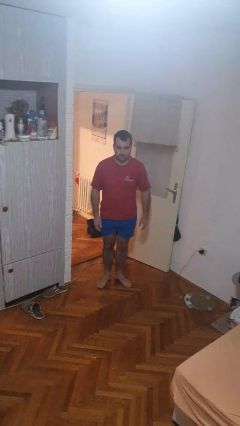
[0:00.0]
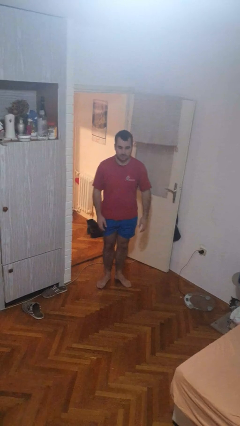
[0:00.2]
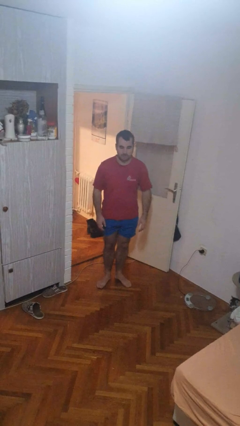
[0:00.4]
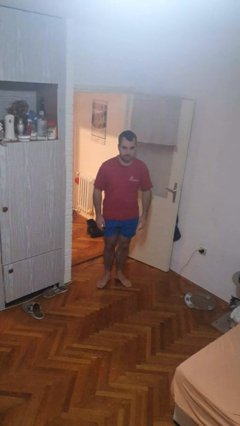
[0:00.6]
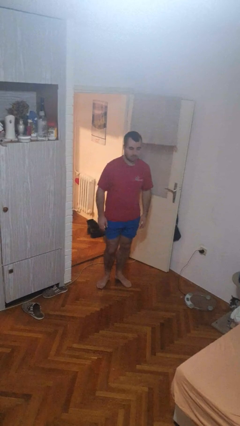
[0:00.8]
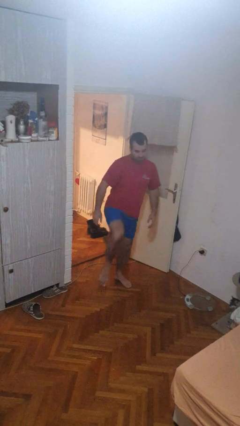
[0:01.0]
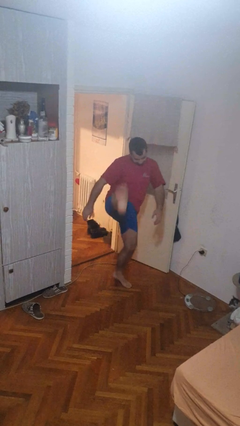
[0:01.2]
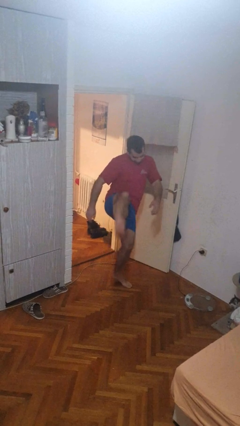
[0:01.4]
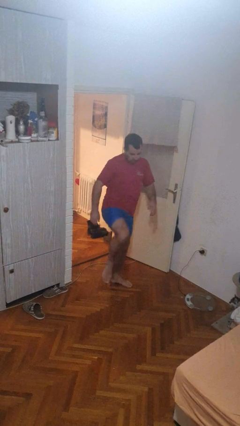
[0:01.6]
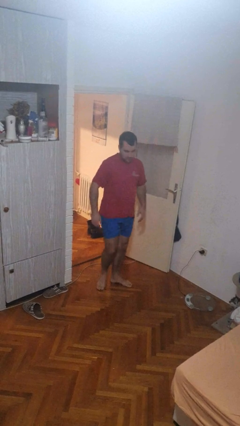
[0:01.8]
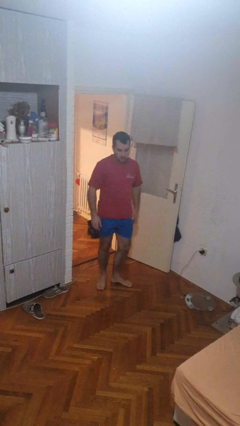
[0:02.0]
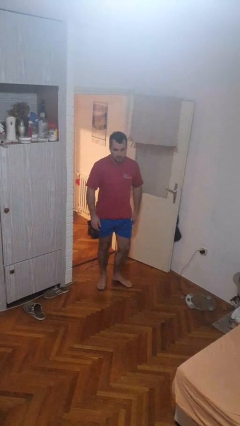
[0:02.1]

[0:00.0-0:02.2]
person karate kicks

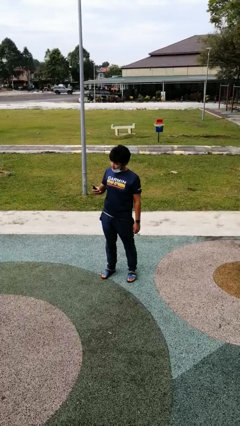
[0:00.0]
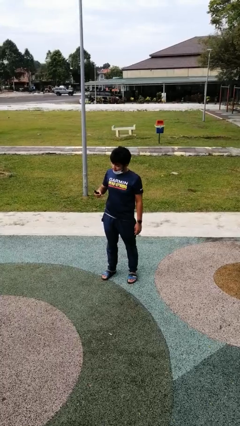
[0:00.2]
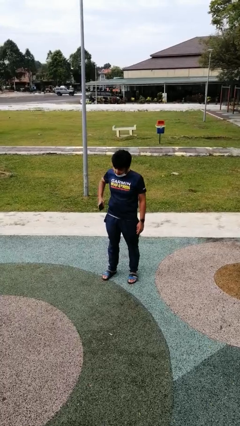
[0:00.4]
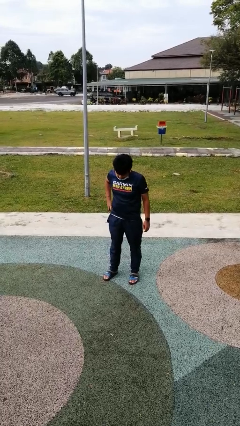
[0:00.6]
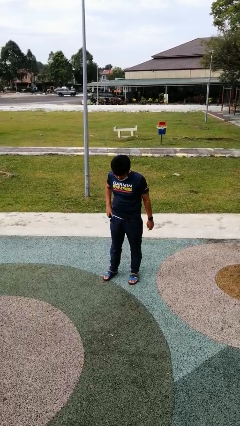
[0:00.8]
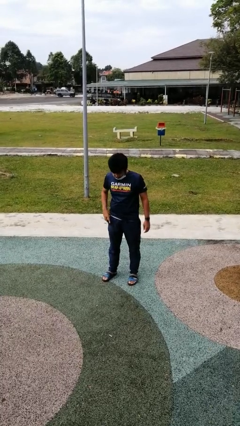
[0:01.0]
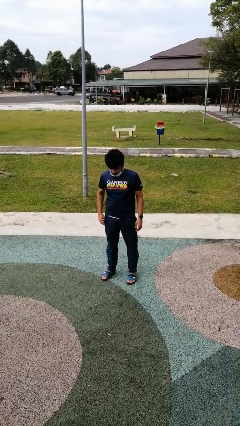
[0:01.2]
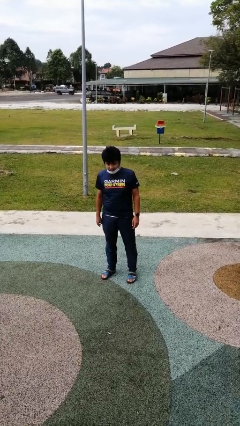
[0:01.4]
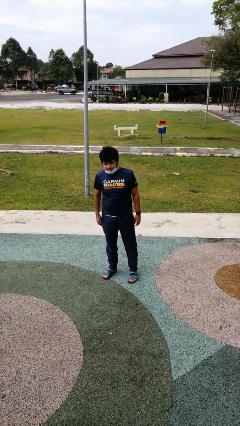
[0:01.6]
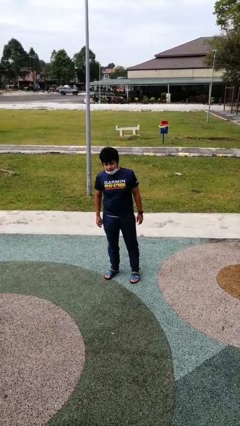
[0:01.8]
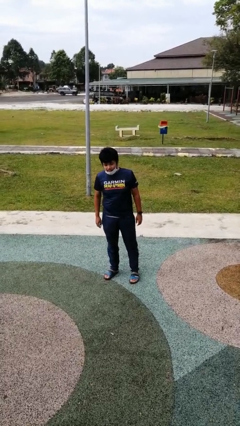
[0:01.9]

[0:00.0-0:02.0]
person puts phone into pocket

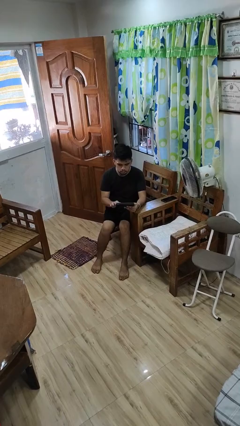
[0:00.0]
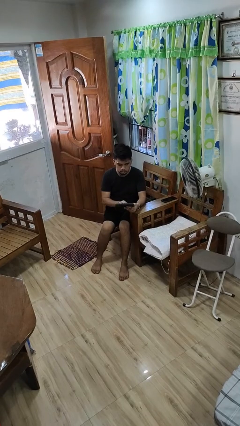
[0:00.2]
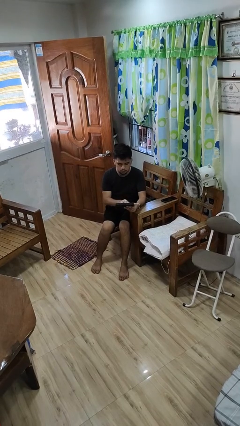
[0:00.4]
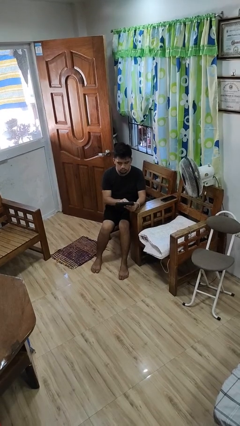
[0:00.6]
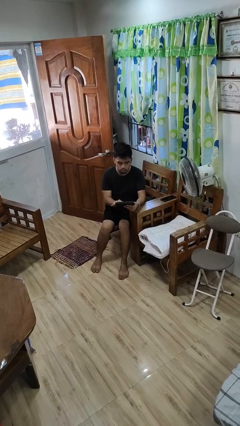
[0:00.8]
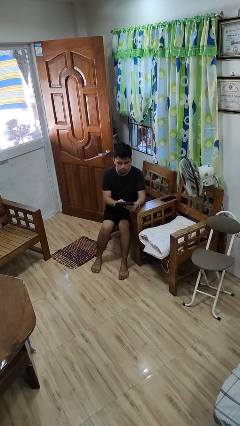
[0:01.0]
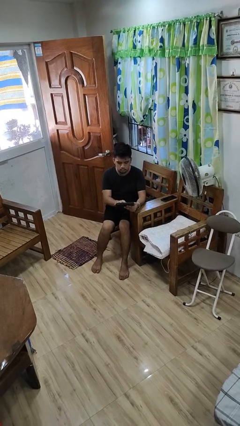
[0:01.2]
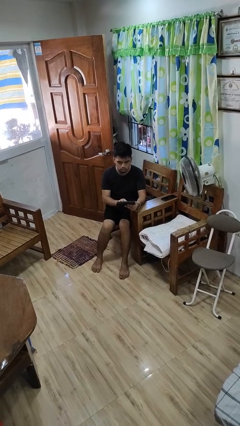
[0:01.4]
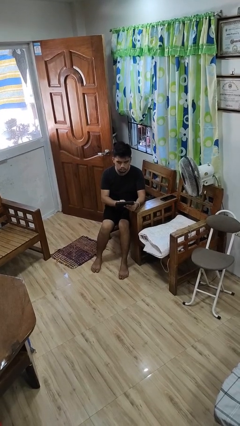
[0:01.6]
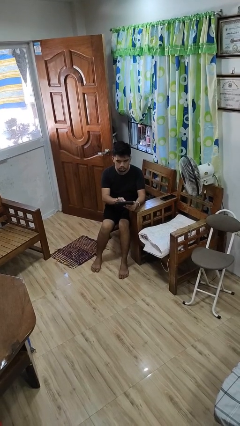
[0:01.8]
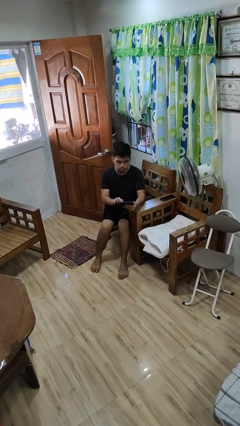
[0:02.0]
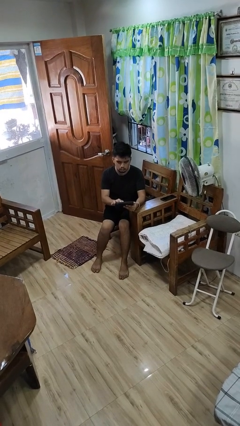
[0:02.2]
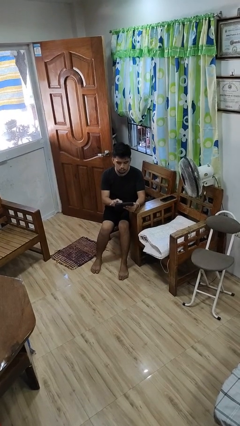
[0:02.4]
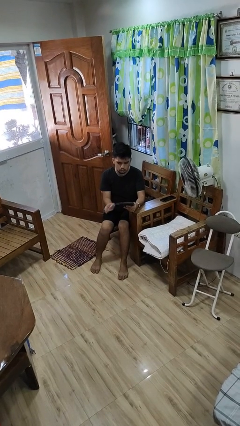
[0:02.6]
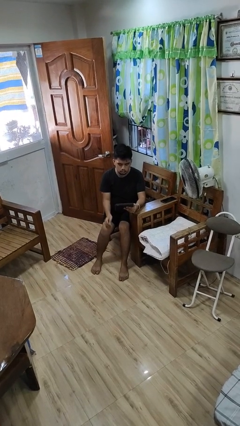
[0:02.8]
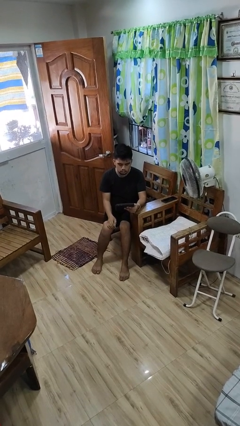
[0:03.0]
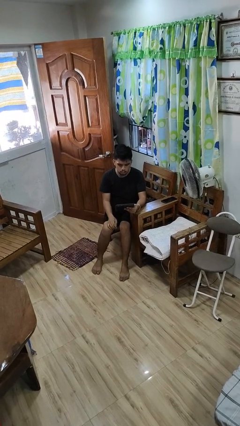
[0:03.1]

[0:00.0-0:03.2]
person interacts with tablet

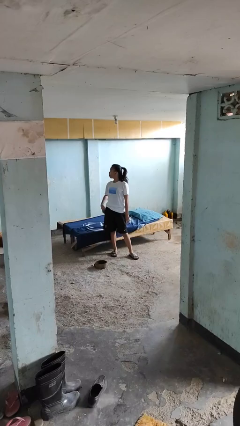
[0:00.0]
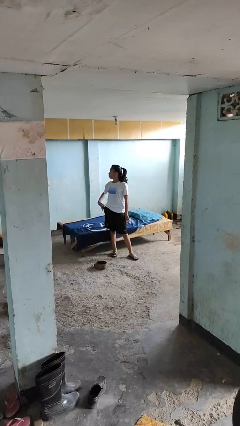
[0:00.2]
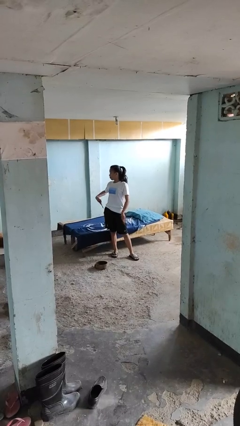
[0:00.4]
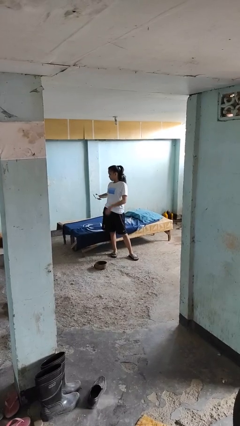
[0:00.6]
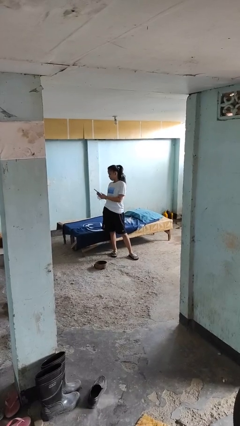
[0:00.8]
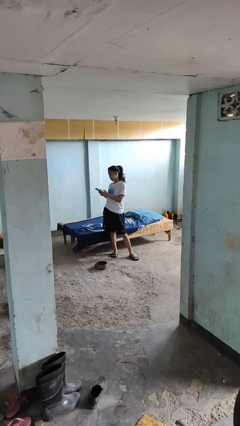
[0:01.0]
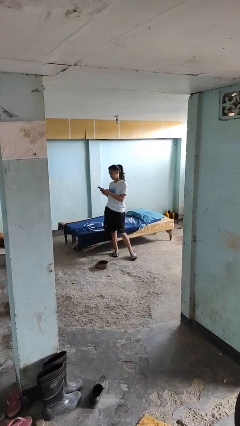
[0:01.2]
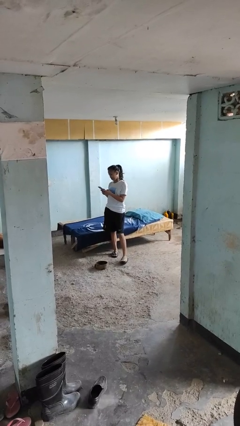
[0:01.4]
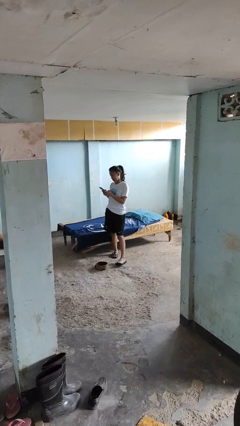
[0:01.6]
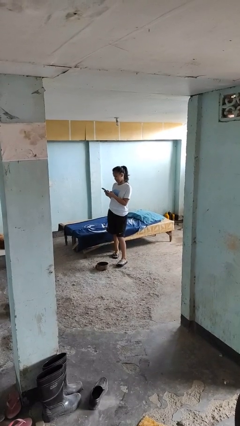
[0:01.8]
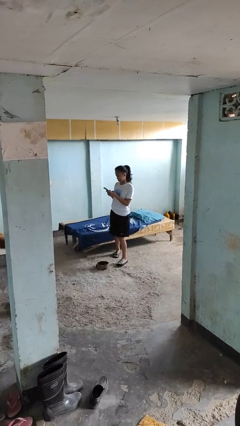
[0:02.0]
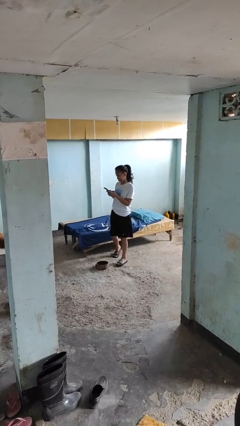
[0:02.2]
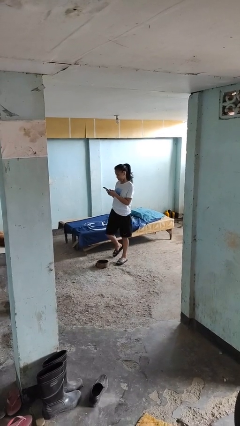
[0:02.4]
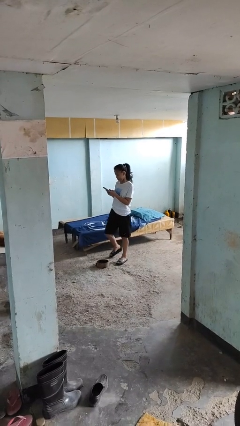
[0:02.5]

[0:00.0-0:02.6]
person takes phone from pocket

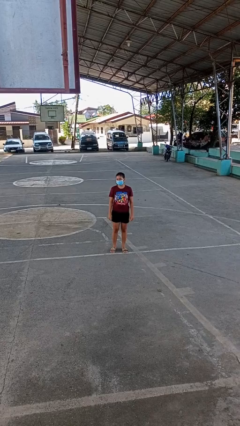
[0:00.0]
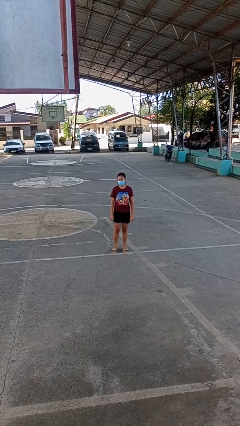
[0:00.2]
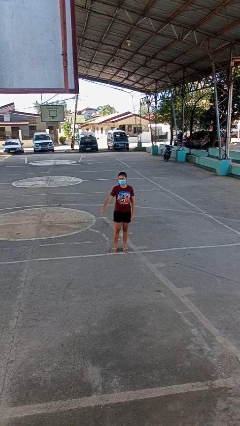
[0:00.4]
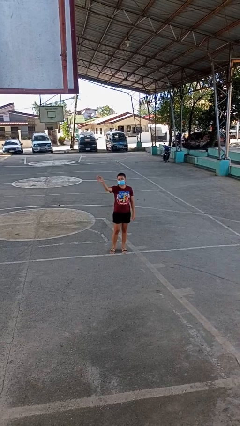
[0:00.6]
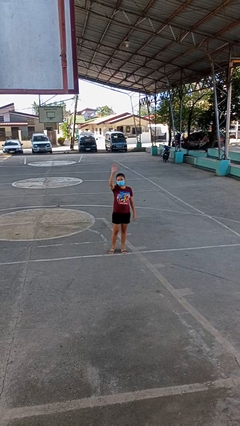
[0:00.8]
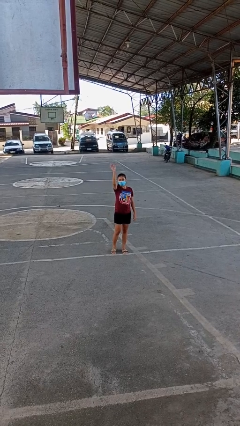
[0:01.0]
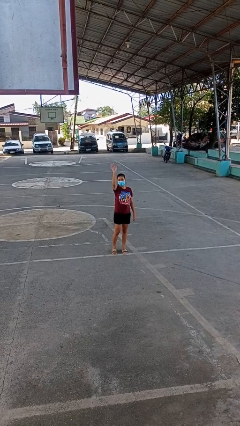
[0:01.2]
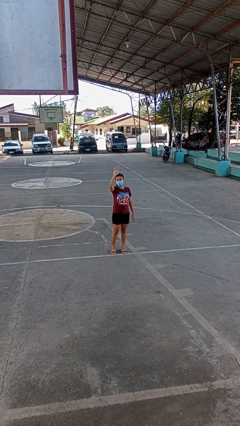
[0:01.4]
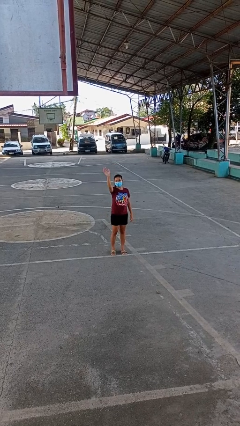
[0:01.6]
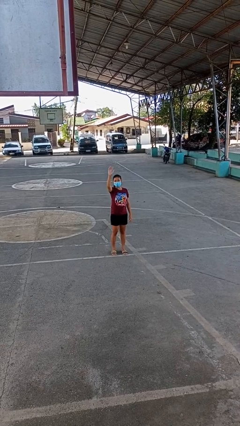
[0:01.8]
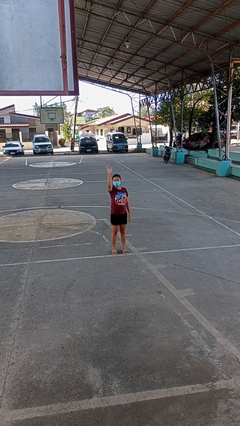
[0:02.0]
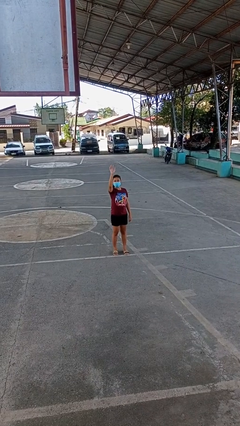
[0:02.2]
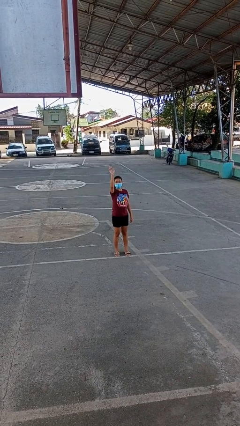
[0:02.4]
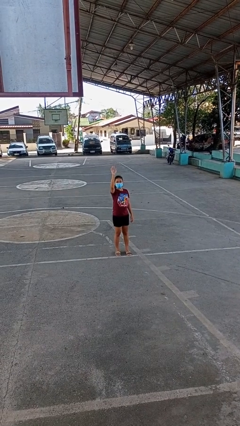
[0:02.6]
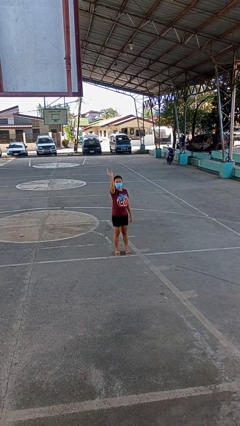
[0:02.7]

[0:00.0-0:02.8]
person waves at person

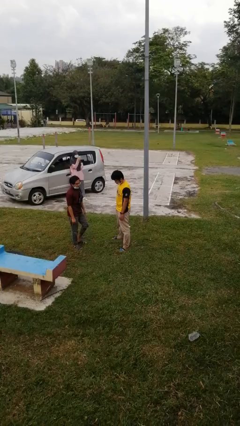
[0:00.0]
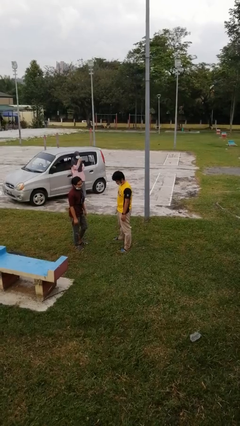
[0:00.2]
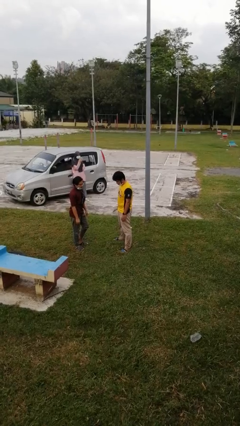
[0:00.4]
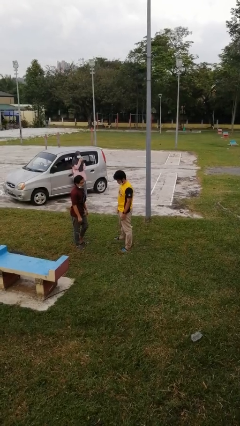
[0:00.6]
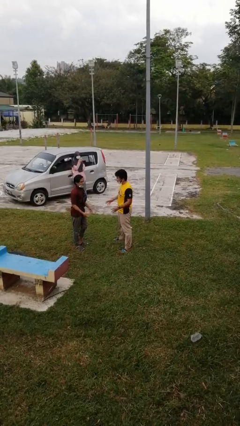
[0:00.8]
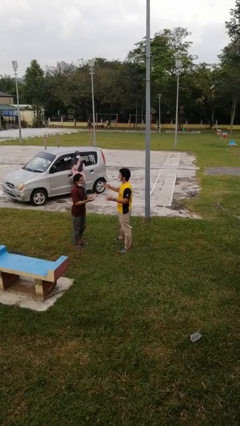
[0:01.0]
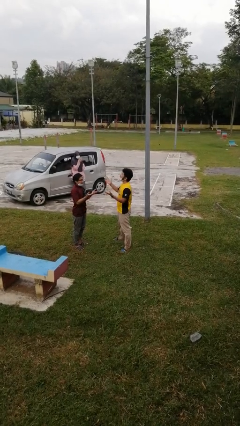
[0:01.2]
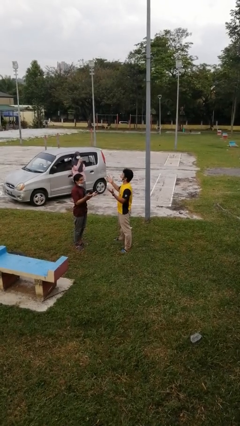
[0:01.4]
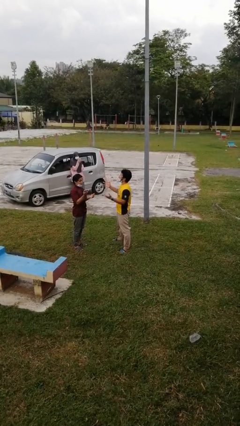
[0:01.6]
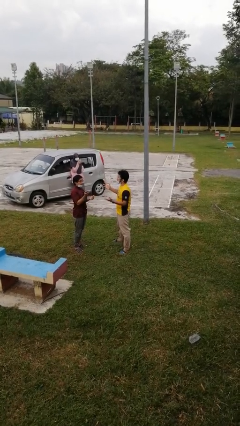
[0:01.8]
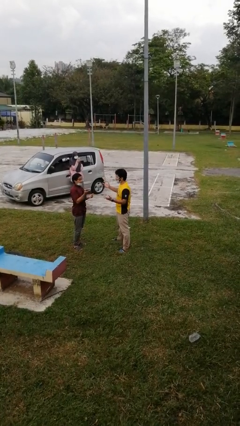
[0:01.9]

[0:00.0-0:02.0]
person talks to person

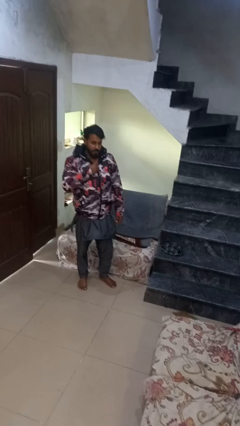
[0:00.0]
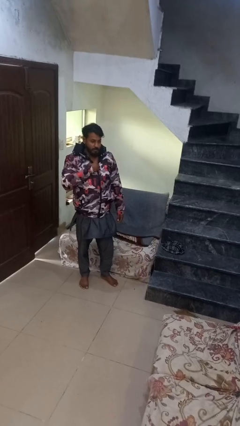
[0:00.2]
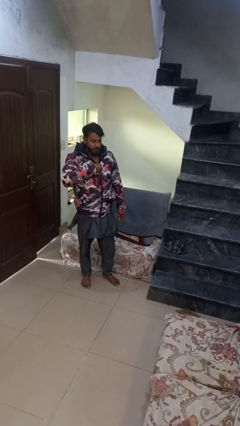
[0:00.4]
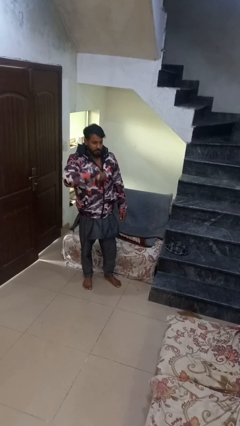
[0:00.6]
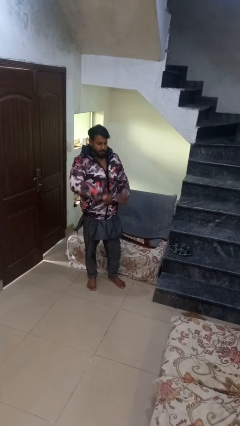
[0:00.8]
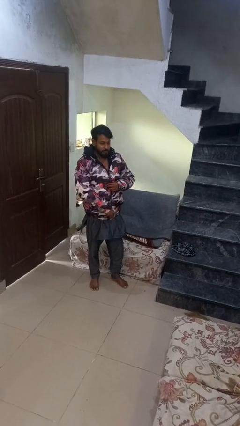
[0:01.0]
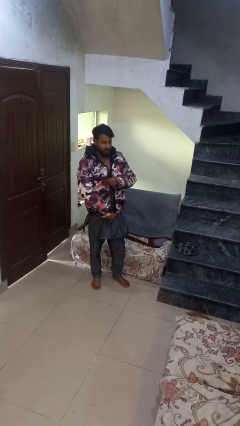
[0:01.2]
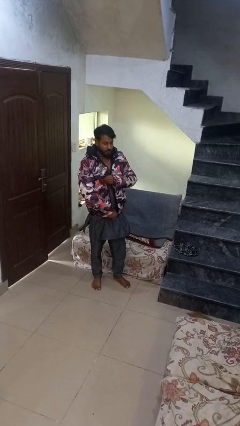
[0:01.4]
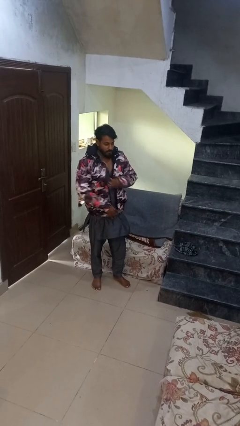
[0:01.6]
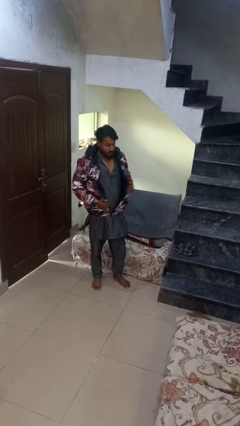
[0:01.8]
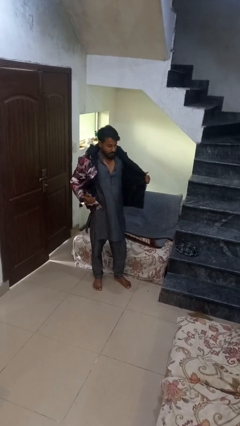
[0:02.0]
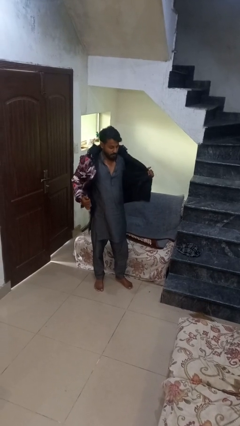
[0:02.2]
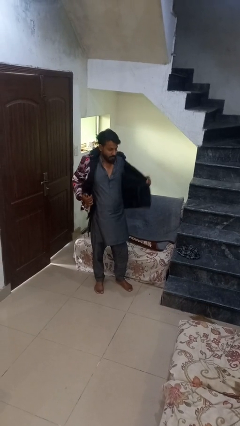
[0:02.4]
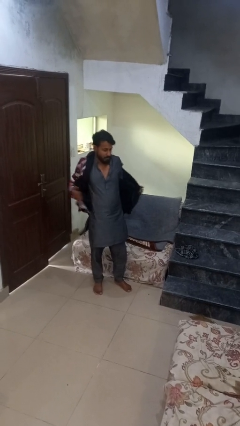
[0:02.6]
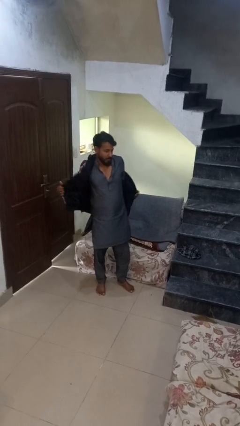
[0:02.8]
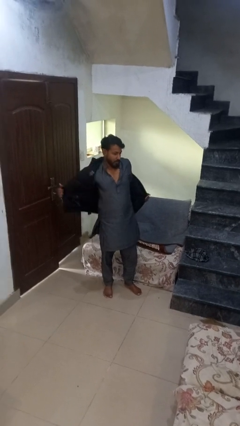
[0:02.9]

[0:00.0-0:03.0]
person unzips jacket
